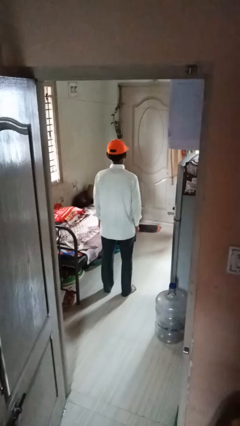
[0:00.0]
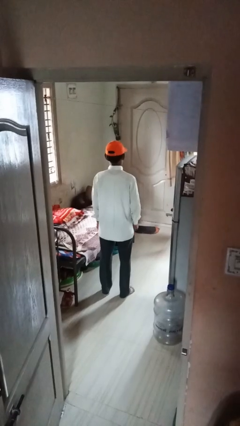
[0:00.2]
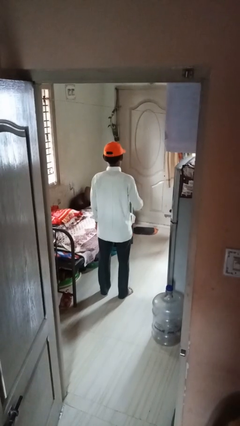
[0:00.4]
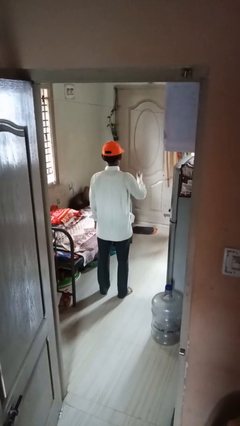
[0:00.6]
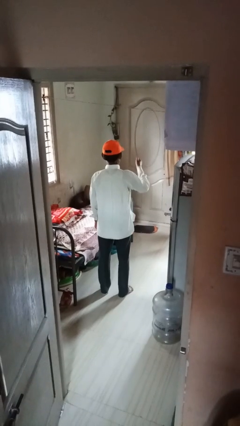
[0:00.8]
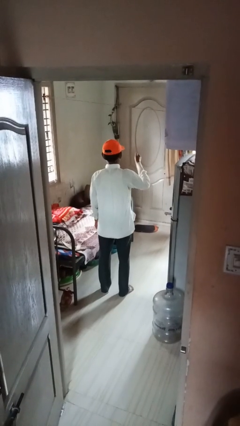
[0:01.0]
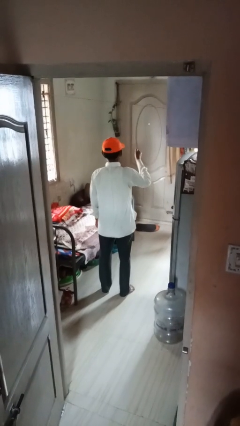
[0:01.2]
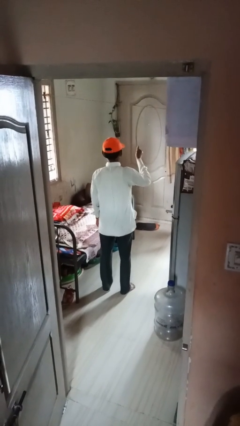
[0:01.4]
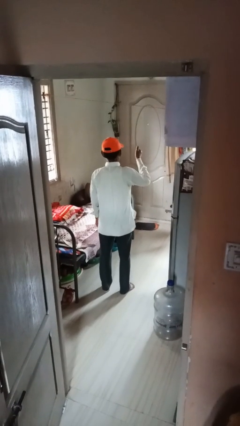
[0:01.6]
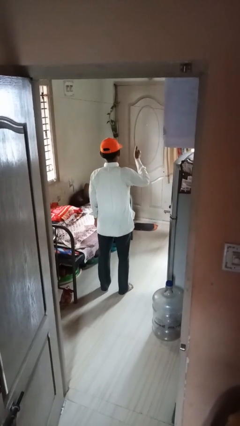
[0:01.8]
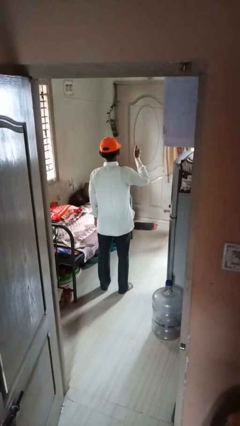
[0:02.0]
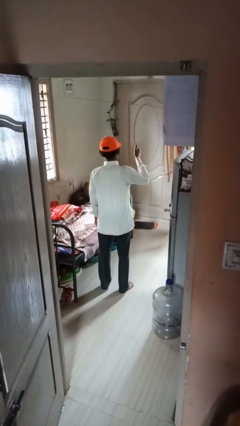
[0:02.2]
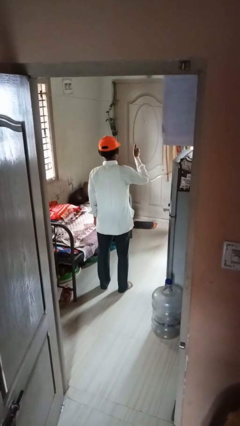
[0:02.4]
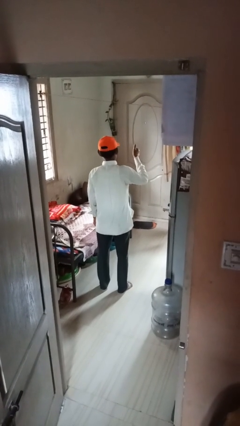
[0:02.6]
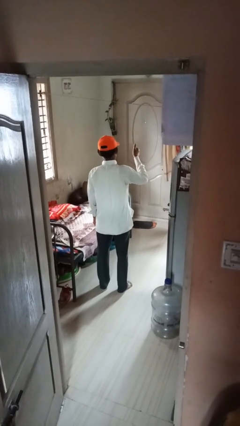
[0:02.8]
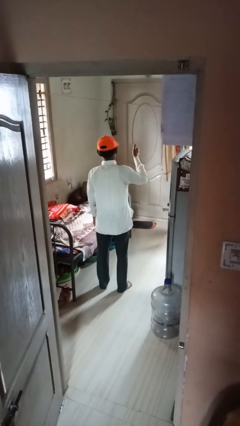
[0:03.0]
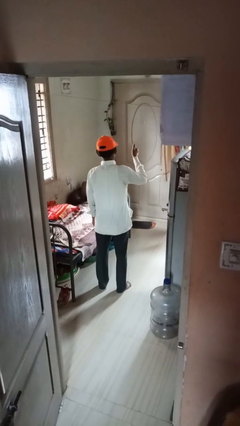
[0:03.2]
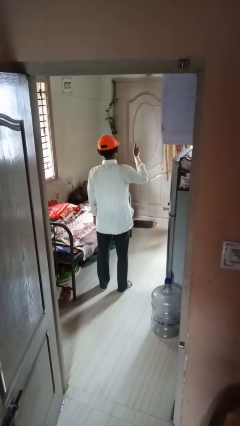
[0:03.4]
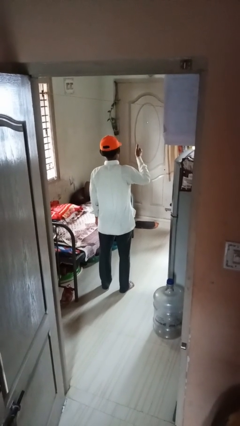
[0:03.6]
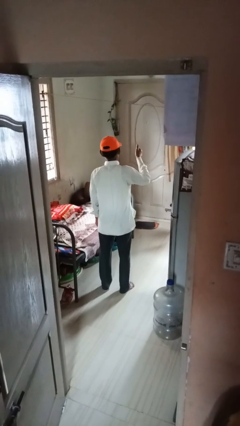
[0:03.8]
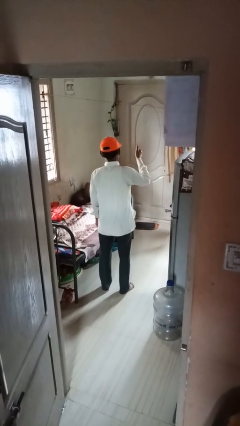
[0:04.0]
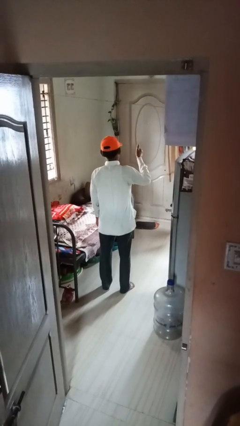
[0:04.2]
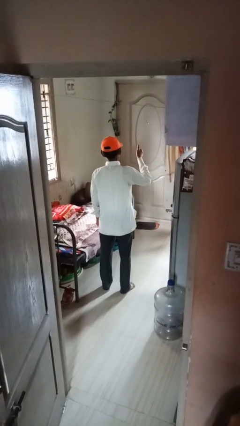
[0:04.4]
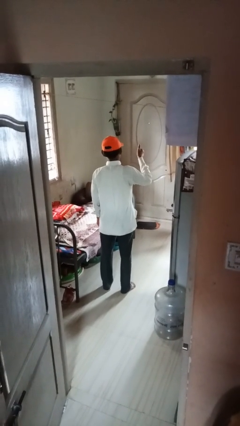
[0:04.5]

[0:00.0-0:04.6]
person gestures thumbs up

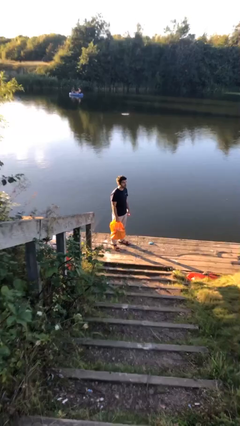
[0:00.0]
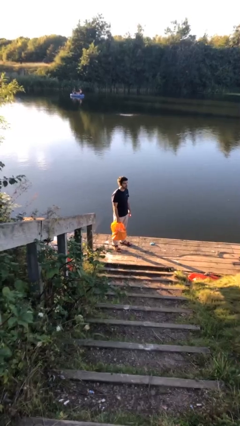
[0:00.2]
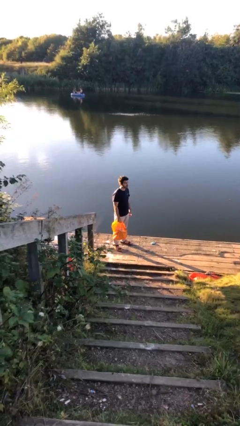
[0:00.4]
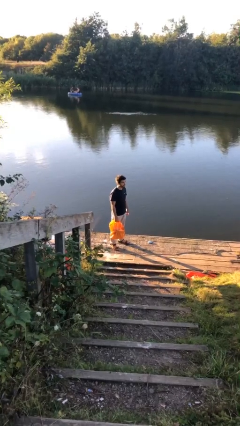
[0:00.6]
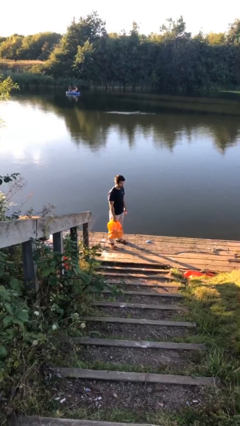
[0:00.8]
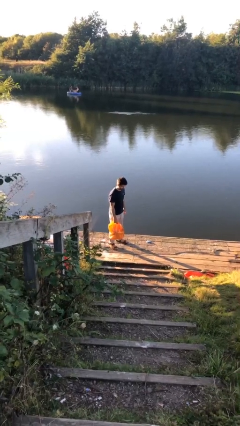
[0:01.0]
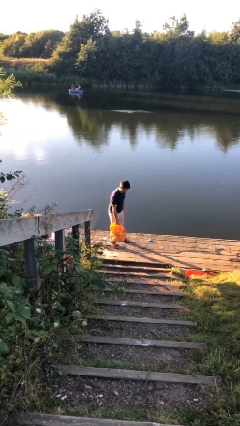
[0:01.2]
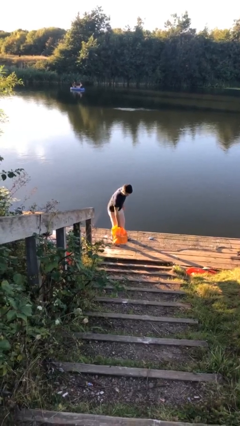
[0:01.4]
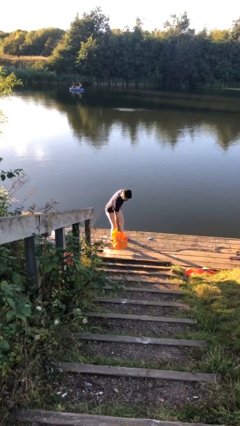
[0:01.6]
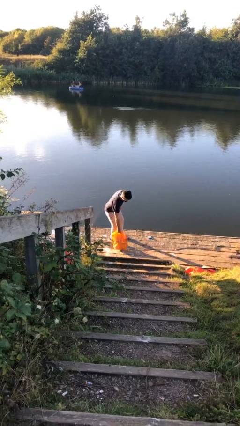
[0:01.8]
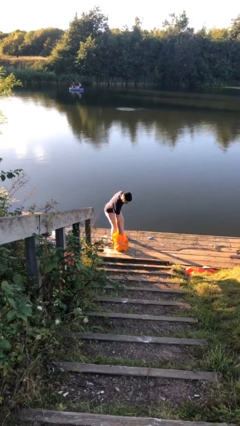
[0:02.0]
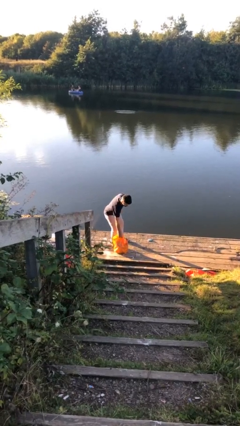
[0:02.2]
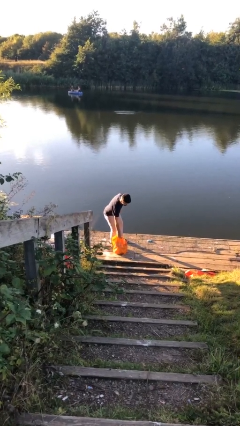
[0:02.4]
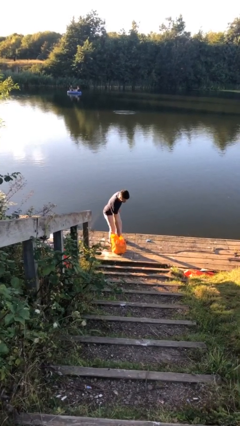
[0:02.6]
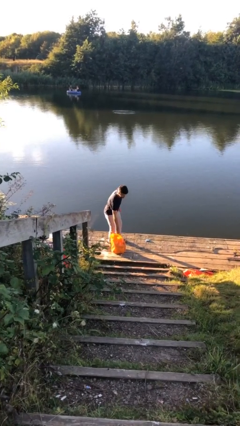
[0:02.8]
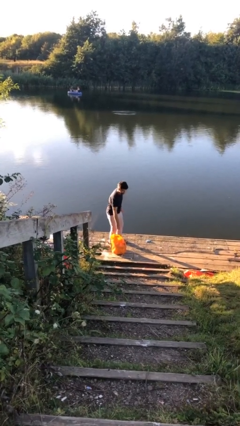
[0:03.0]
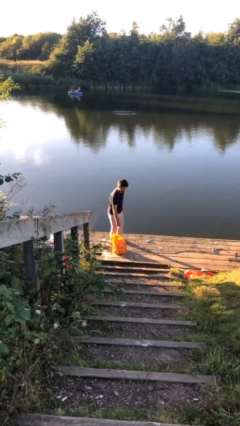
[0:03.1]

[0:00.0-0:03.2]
person puts down object on floor

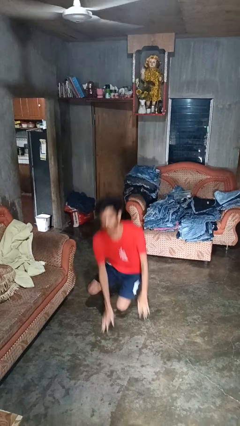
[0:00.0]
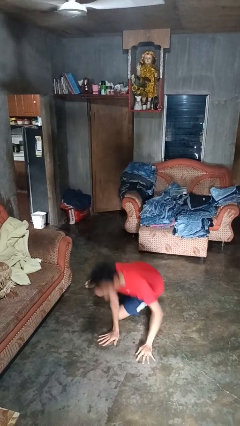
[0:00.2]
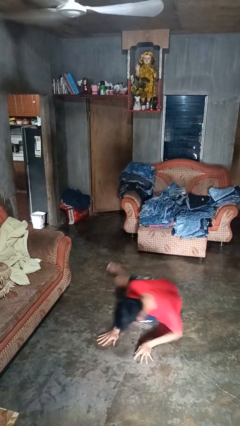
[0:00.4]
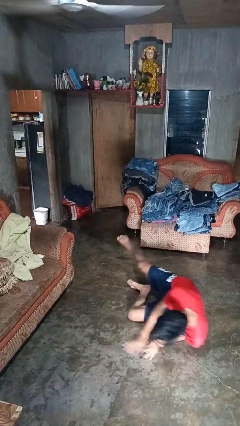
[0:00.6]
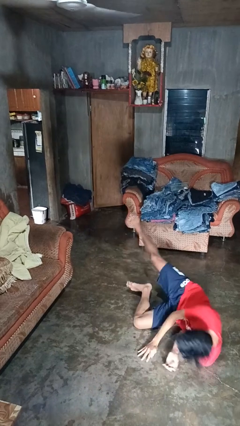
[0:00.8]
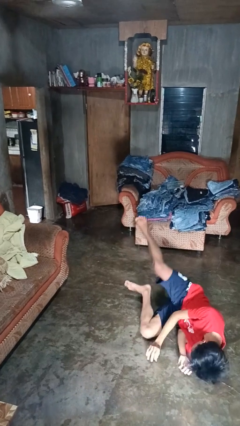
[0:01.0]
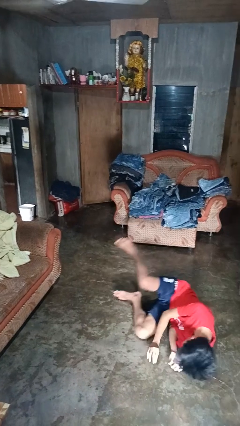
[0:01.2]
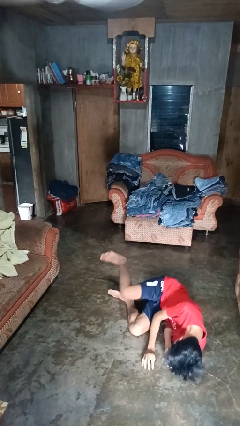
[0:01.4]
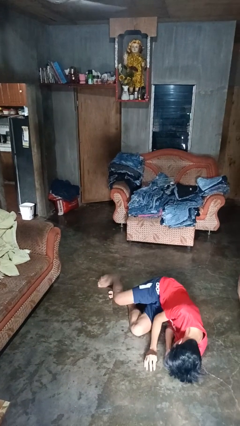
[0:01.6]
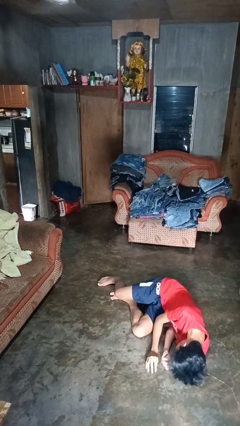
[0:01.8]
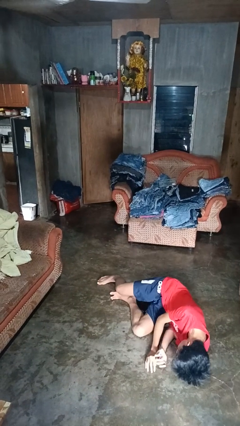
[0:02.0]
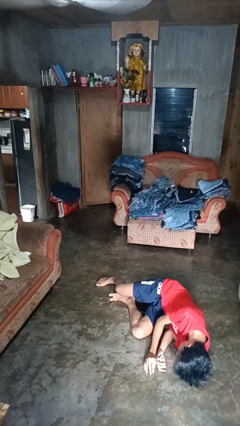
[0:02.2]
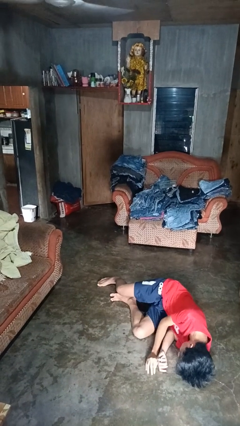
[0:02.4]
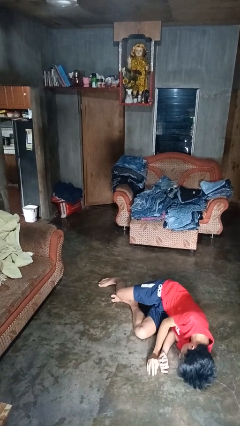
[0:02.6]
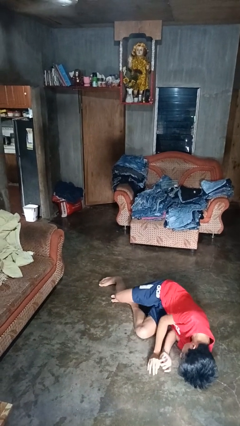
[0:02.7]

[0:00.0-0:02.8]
person falls while standing

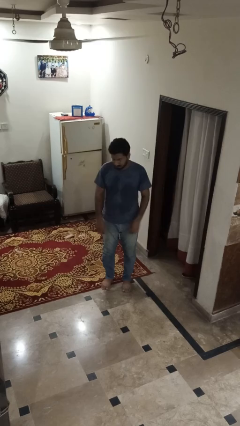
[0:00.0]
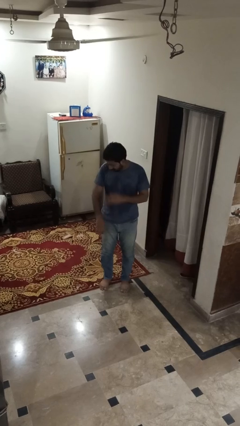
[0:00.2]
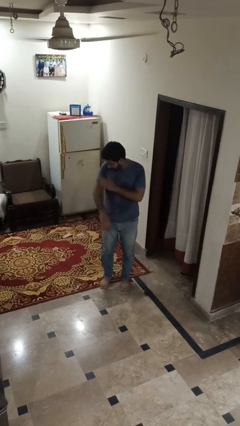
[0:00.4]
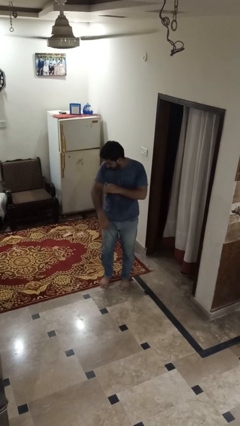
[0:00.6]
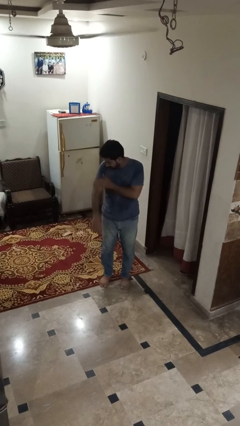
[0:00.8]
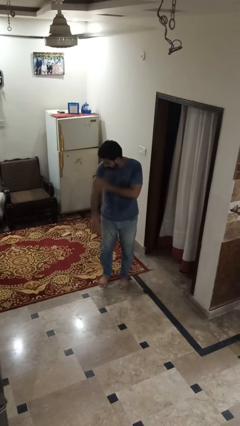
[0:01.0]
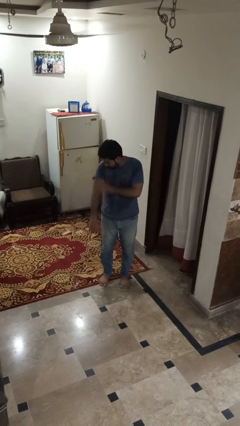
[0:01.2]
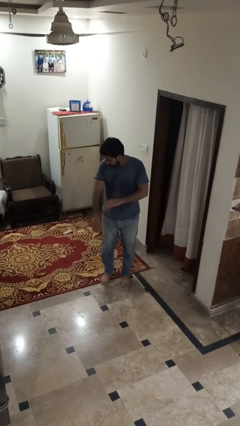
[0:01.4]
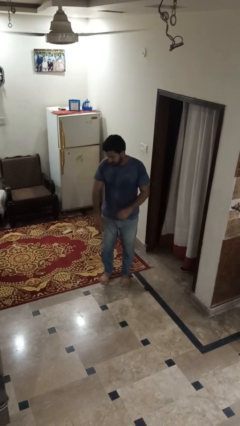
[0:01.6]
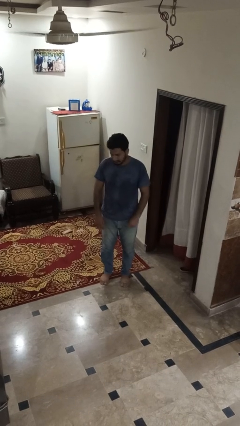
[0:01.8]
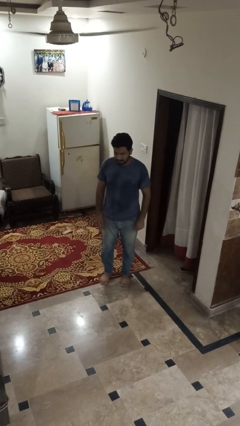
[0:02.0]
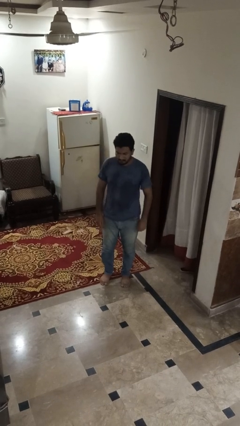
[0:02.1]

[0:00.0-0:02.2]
person swats bug

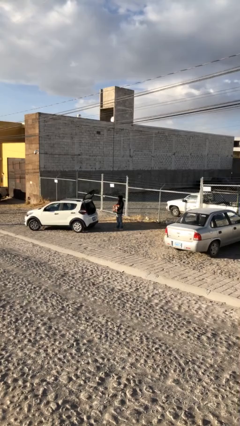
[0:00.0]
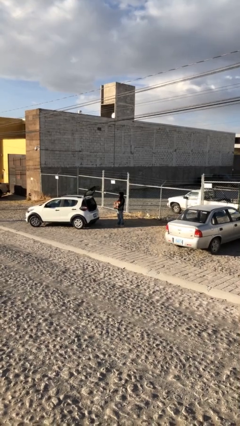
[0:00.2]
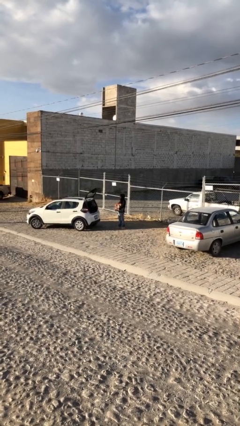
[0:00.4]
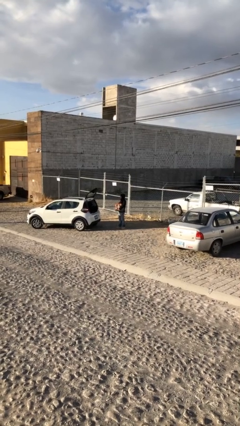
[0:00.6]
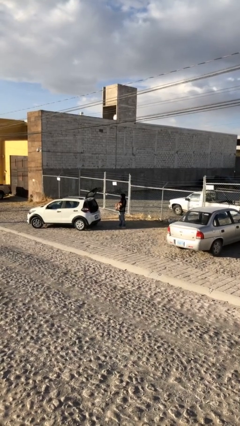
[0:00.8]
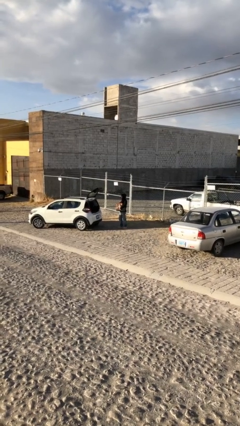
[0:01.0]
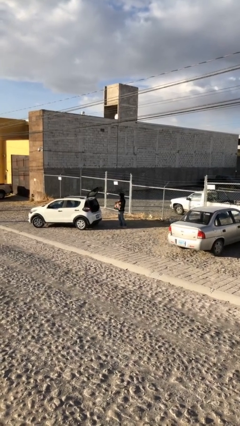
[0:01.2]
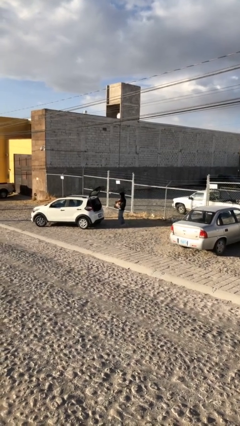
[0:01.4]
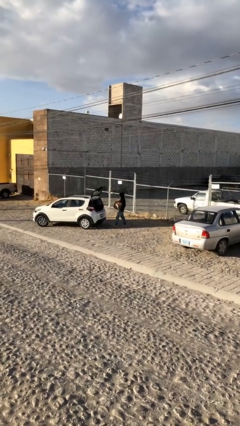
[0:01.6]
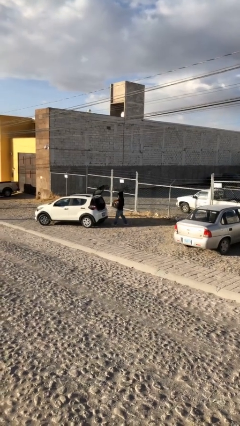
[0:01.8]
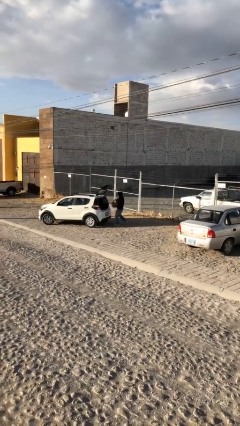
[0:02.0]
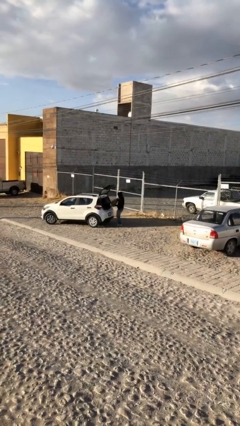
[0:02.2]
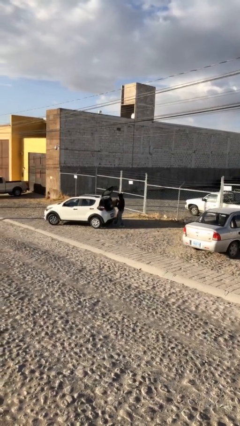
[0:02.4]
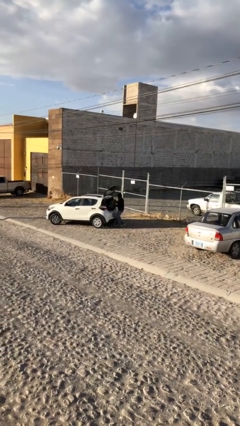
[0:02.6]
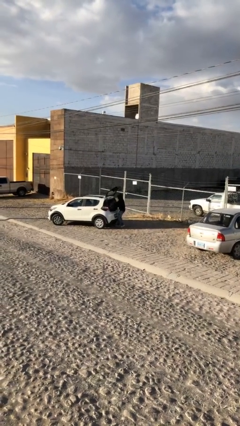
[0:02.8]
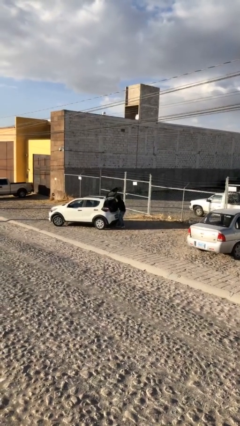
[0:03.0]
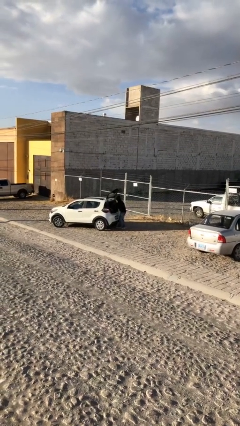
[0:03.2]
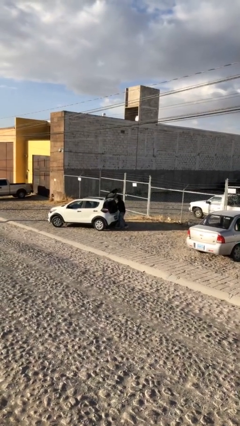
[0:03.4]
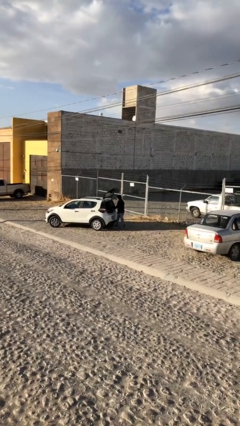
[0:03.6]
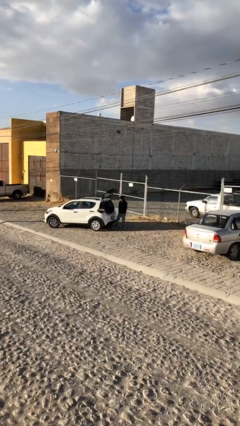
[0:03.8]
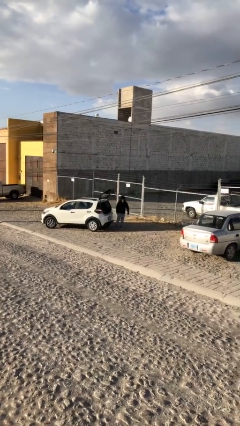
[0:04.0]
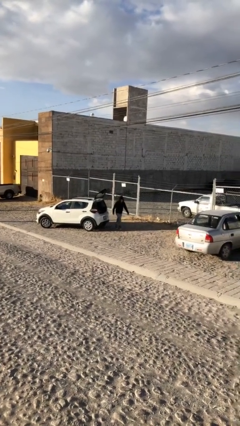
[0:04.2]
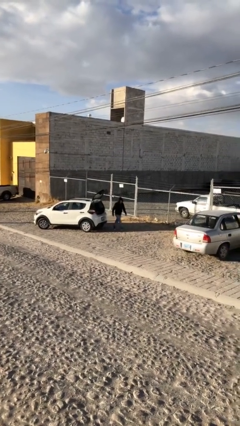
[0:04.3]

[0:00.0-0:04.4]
person loads car

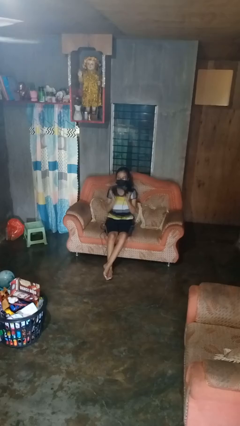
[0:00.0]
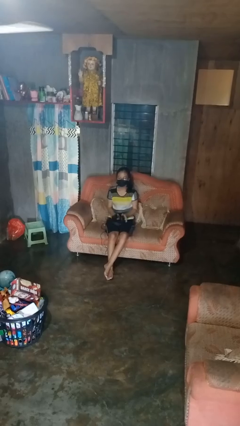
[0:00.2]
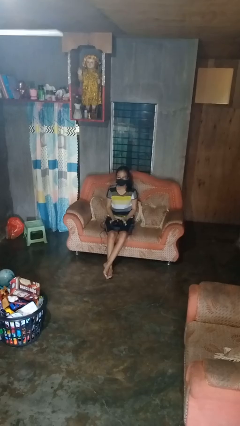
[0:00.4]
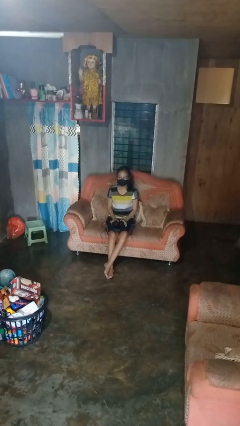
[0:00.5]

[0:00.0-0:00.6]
person takes off headphones
